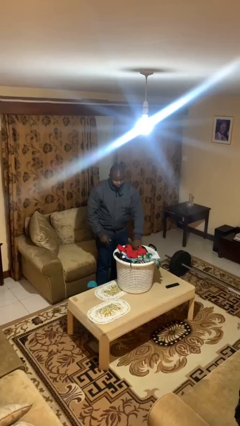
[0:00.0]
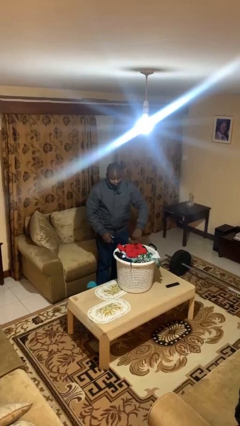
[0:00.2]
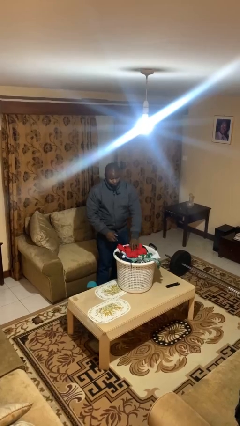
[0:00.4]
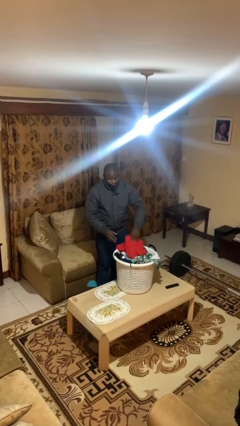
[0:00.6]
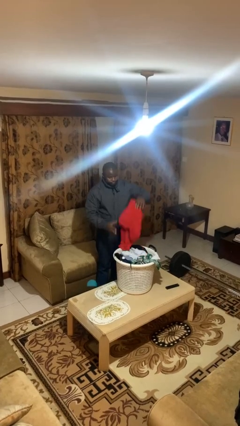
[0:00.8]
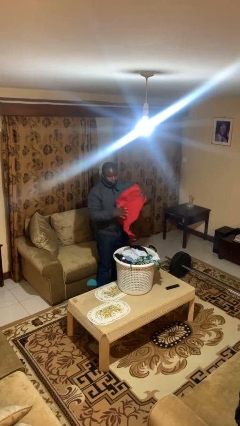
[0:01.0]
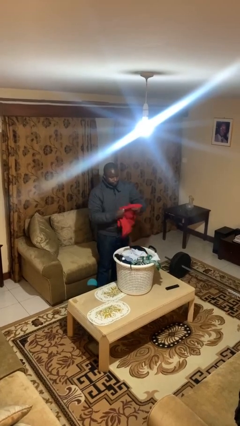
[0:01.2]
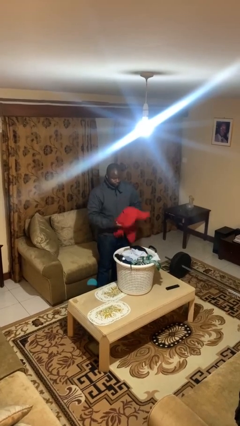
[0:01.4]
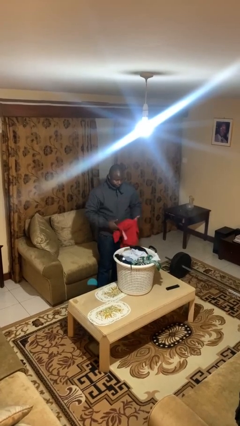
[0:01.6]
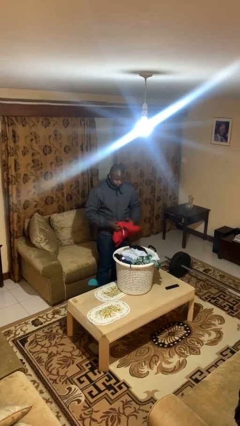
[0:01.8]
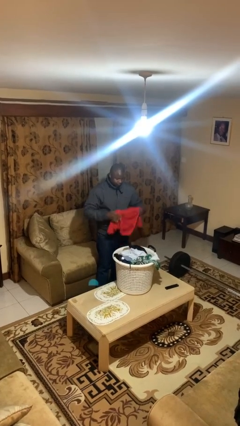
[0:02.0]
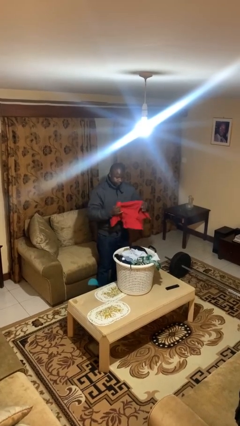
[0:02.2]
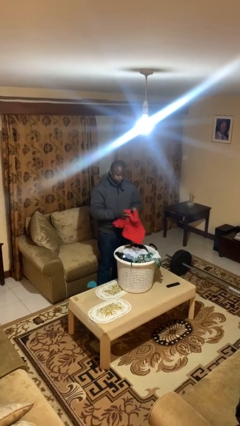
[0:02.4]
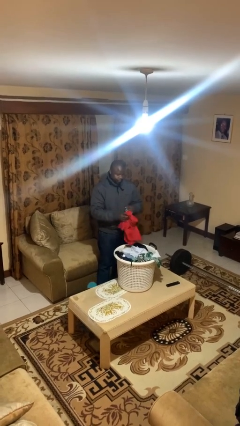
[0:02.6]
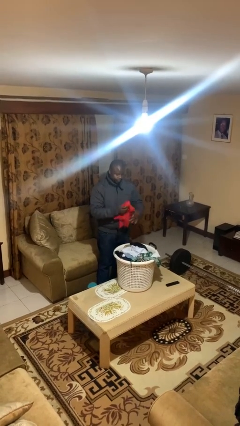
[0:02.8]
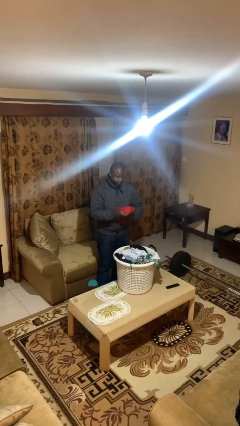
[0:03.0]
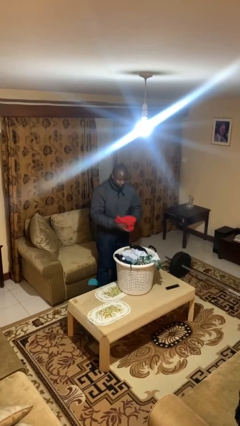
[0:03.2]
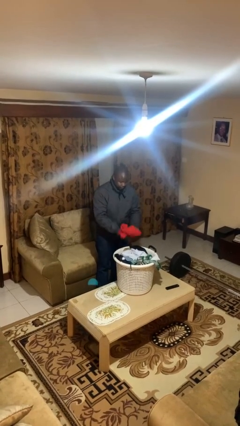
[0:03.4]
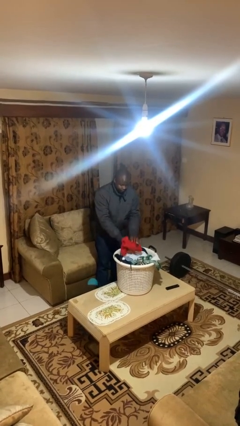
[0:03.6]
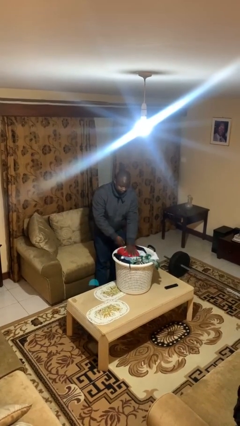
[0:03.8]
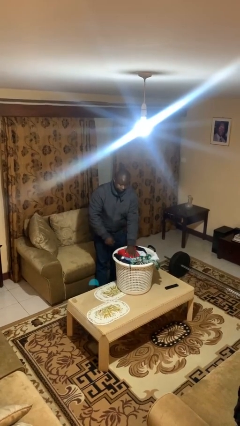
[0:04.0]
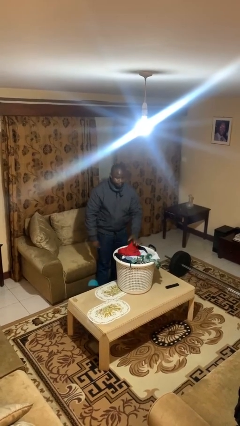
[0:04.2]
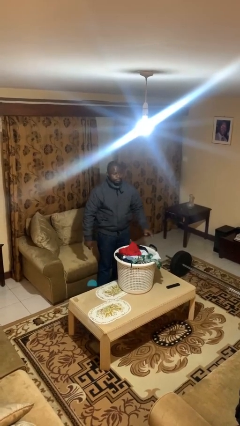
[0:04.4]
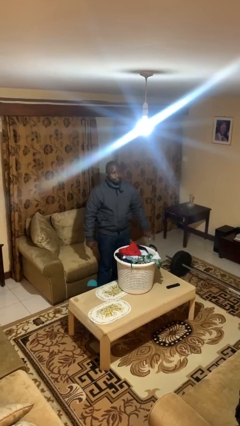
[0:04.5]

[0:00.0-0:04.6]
person folds shirt

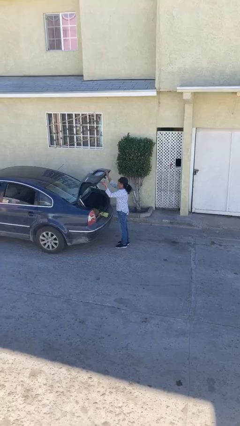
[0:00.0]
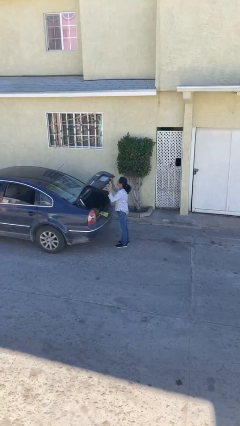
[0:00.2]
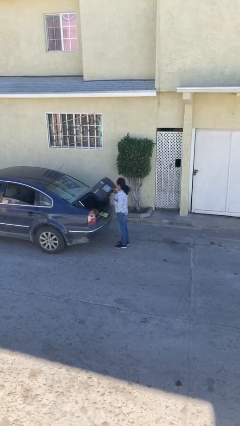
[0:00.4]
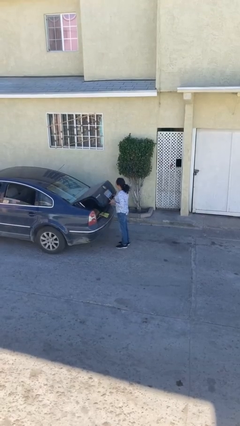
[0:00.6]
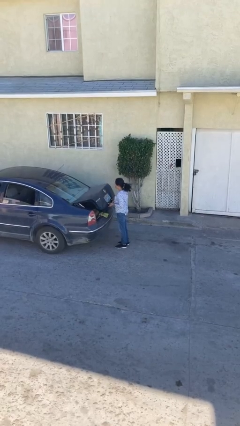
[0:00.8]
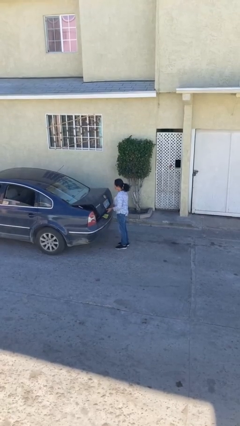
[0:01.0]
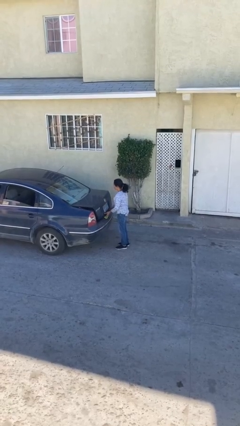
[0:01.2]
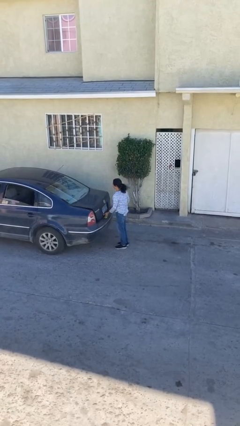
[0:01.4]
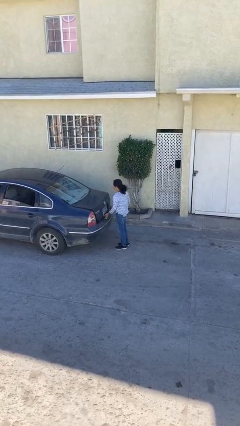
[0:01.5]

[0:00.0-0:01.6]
person closes car trunk

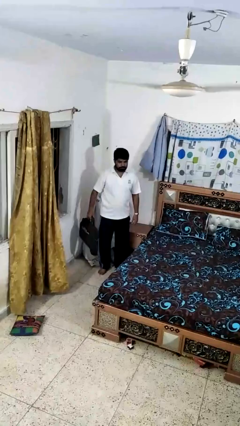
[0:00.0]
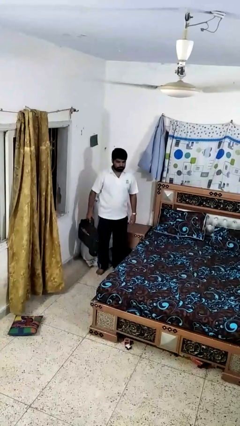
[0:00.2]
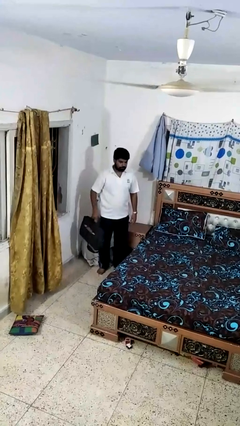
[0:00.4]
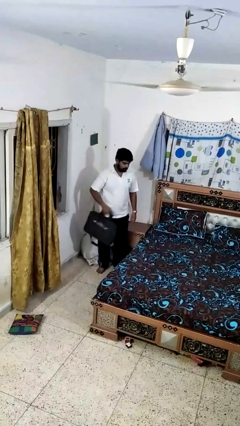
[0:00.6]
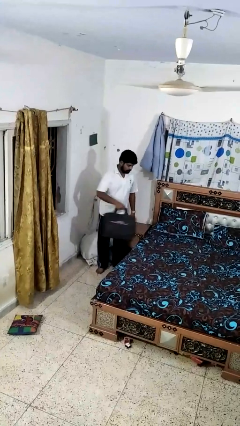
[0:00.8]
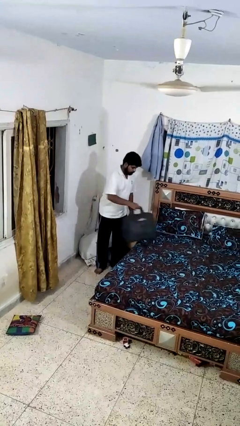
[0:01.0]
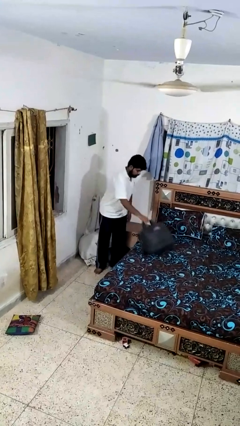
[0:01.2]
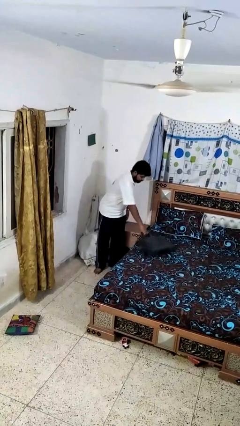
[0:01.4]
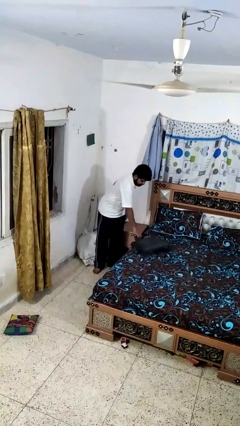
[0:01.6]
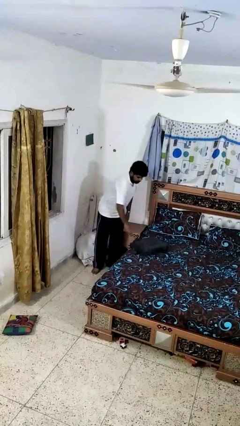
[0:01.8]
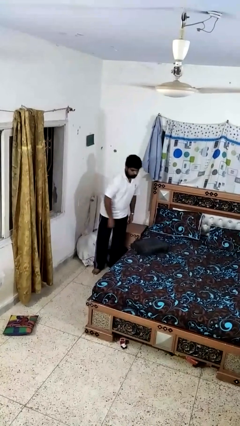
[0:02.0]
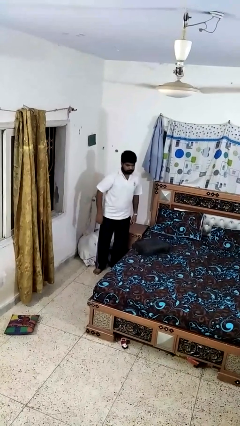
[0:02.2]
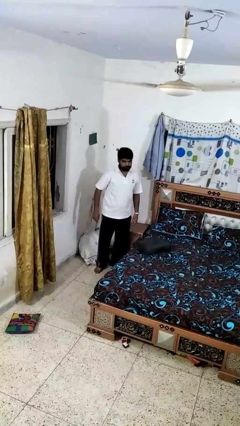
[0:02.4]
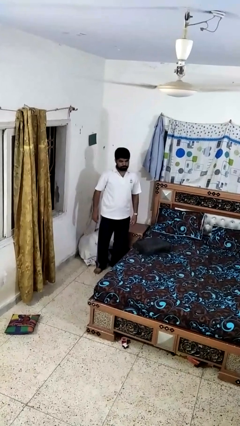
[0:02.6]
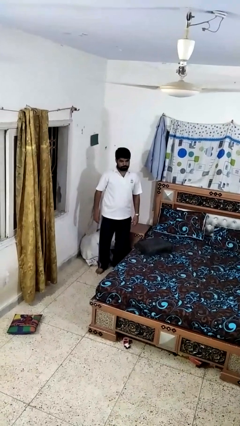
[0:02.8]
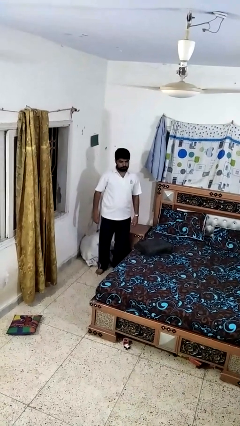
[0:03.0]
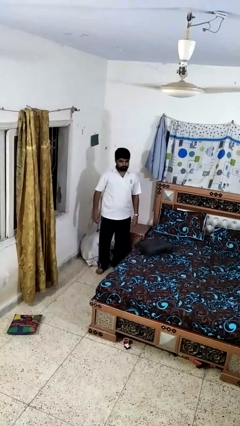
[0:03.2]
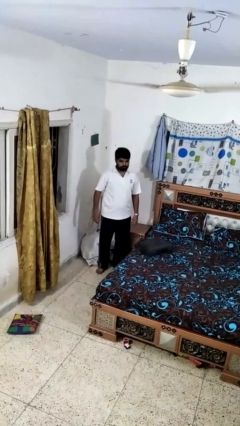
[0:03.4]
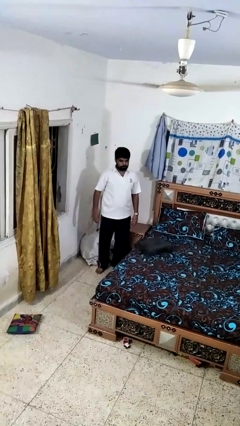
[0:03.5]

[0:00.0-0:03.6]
person puts down object on bed

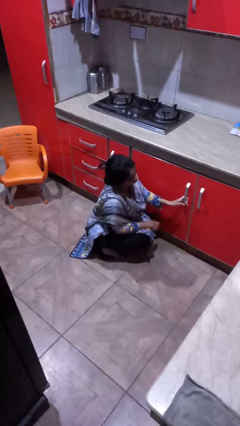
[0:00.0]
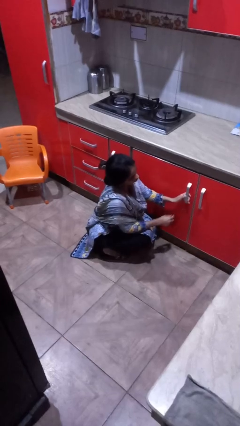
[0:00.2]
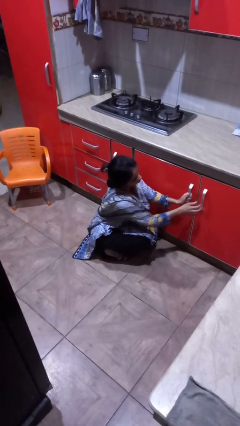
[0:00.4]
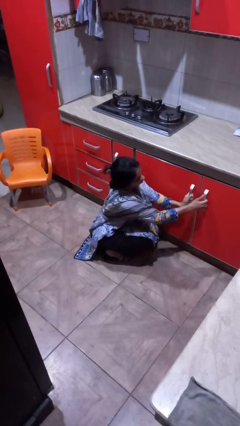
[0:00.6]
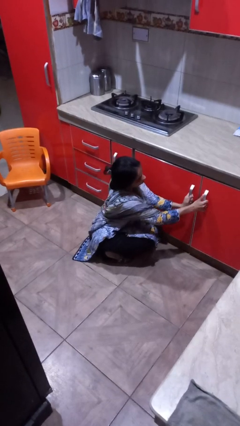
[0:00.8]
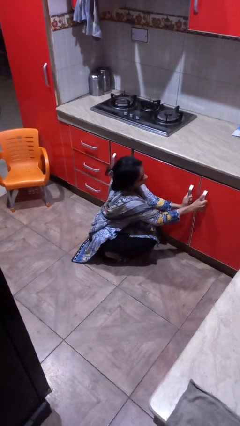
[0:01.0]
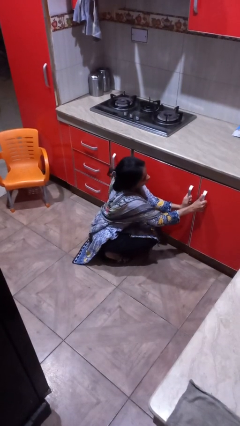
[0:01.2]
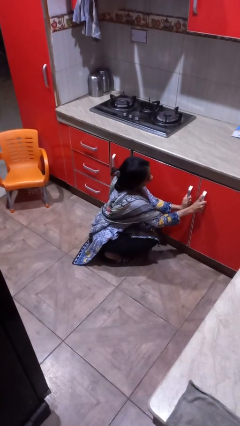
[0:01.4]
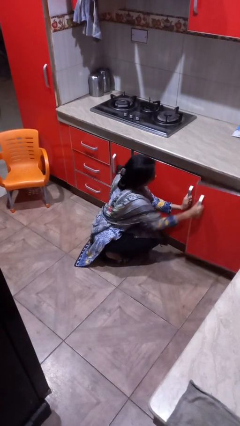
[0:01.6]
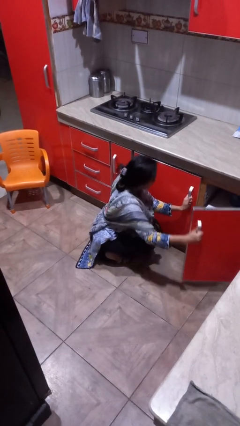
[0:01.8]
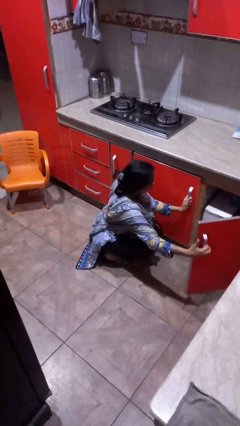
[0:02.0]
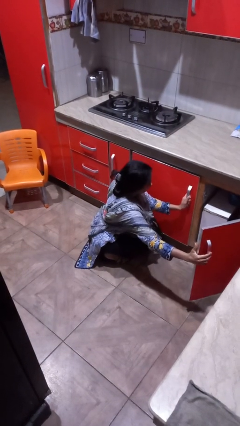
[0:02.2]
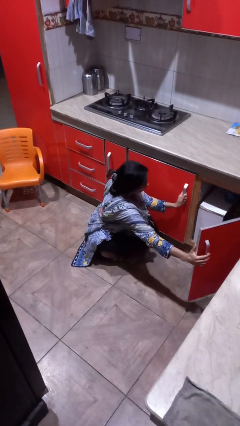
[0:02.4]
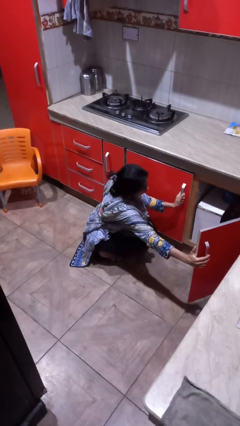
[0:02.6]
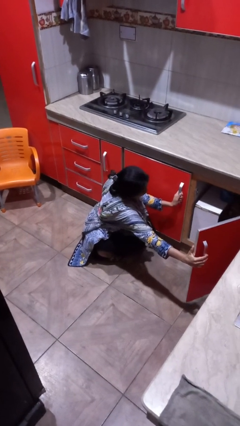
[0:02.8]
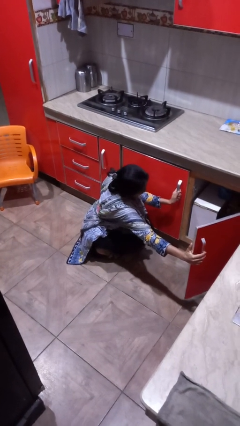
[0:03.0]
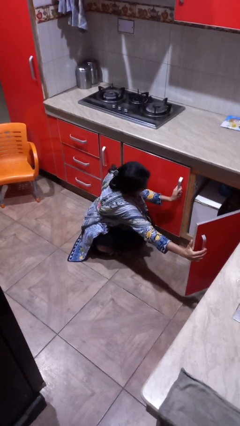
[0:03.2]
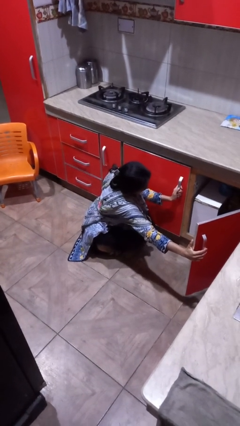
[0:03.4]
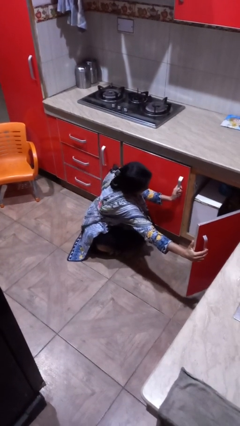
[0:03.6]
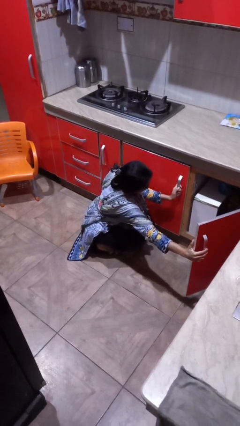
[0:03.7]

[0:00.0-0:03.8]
person opens cabinet

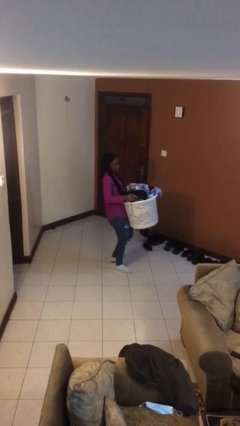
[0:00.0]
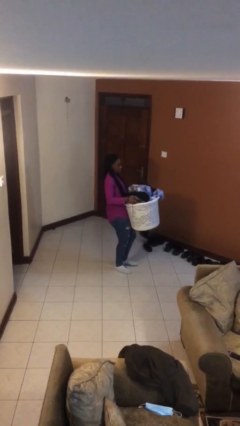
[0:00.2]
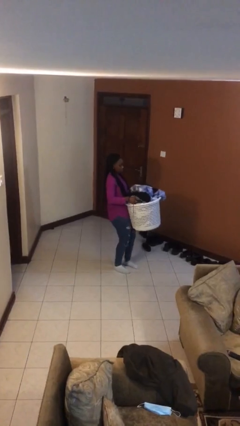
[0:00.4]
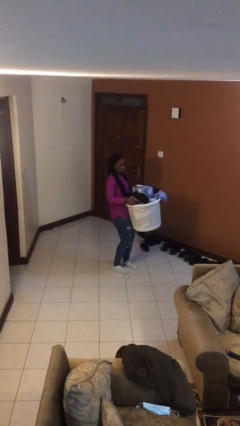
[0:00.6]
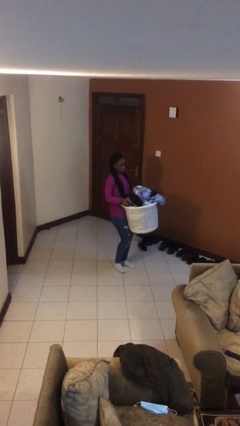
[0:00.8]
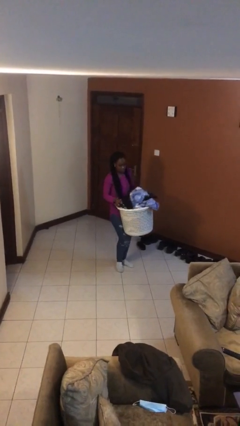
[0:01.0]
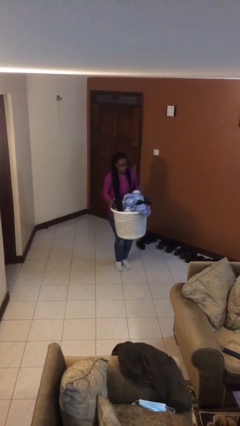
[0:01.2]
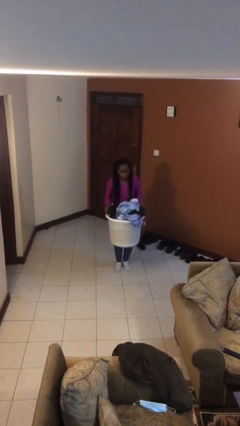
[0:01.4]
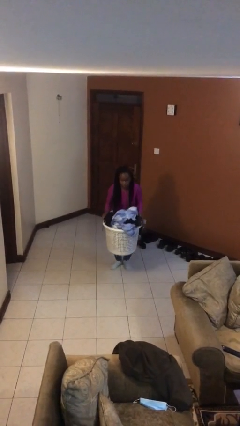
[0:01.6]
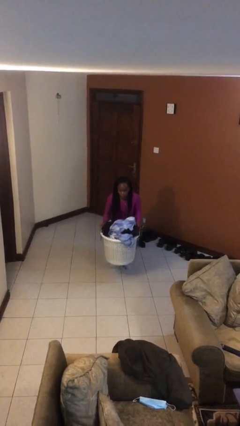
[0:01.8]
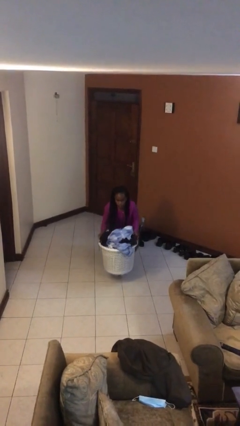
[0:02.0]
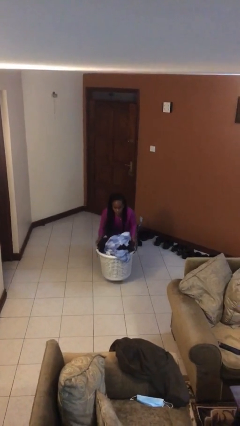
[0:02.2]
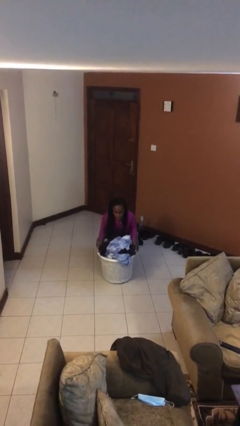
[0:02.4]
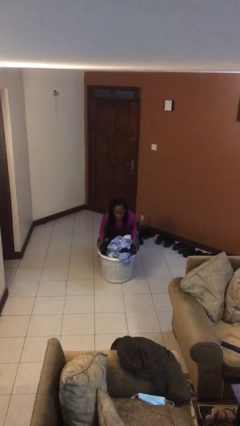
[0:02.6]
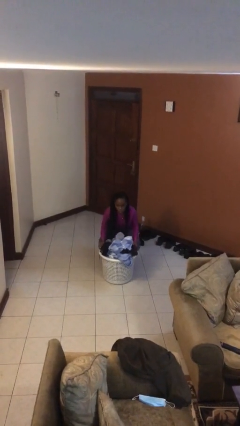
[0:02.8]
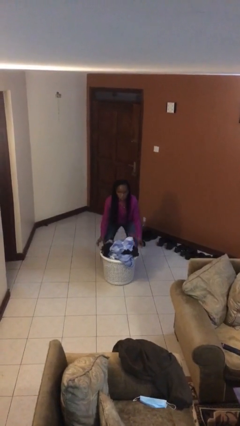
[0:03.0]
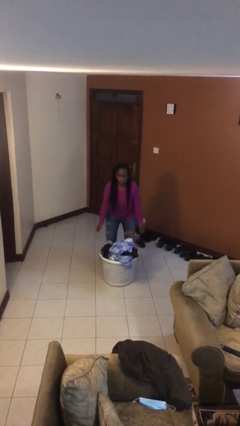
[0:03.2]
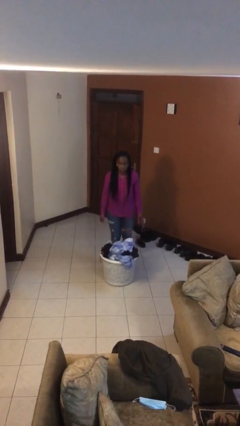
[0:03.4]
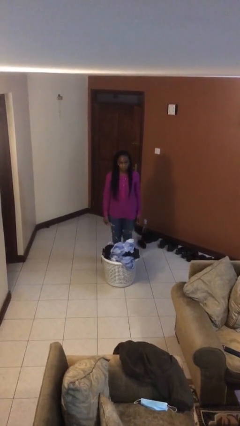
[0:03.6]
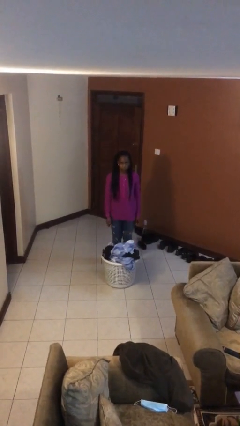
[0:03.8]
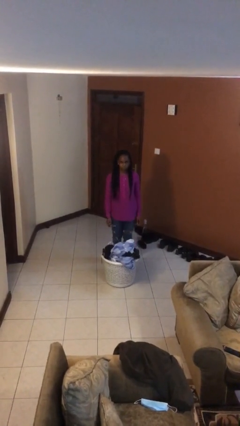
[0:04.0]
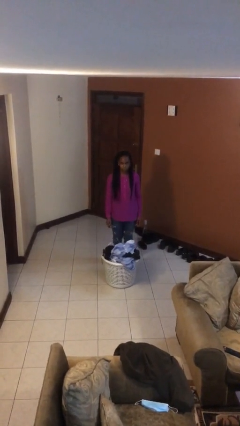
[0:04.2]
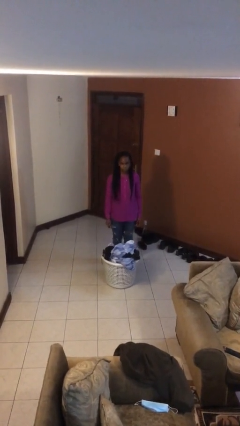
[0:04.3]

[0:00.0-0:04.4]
person puts down object on floor
